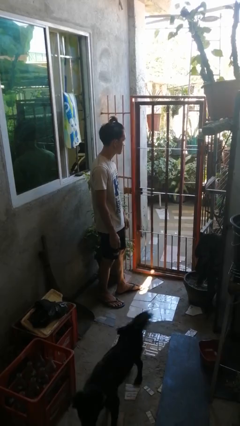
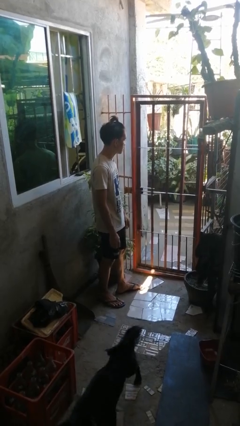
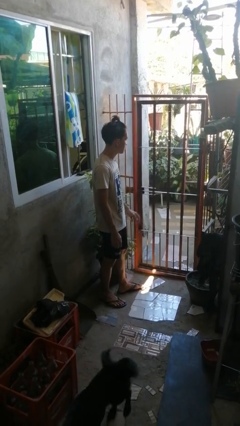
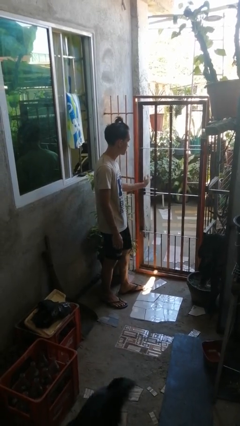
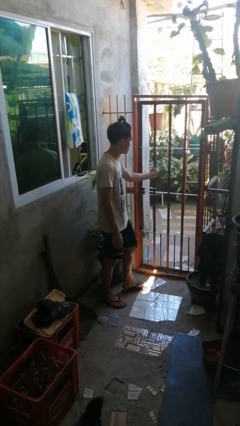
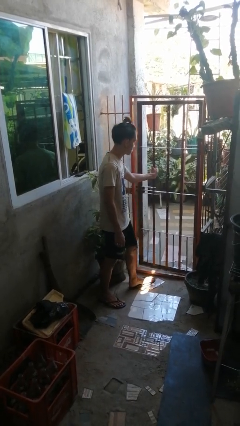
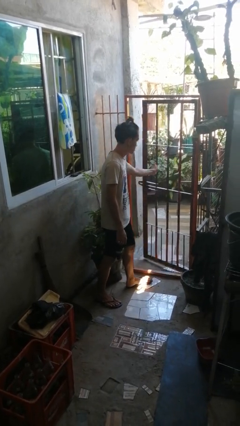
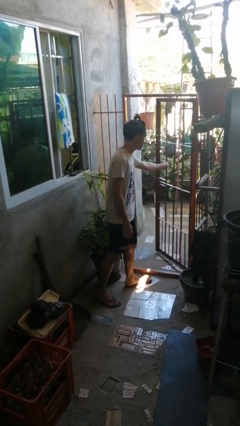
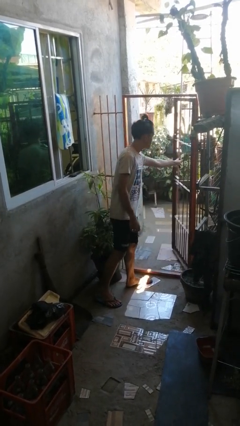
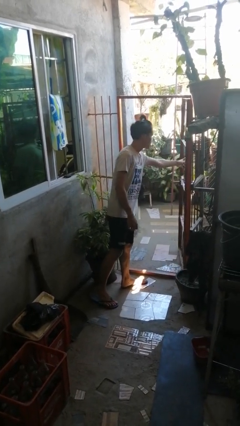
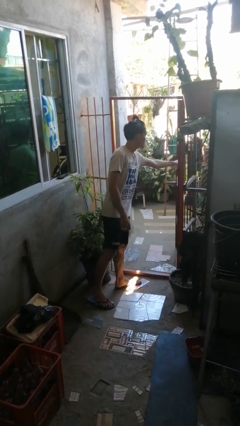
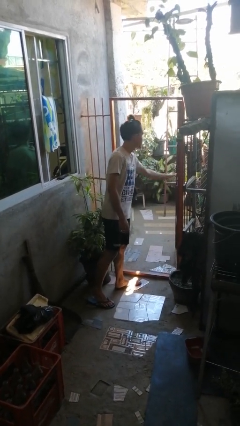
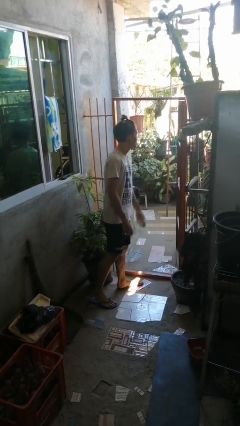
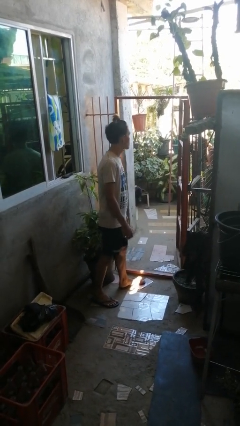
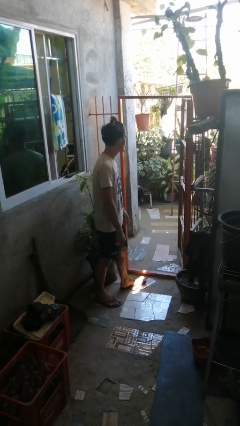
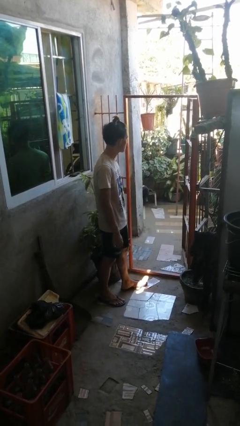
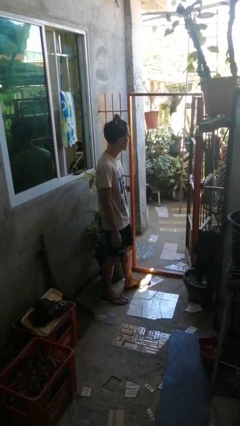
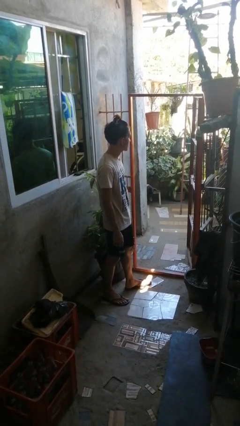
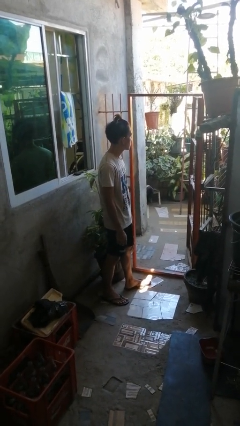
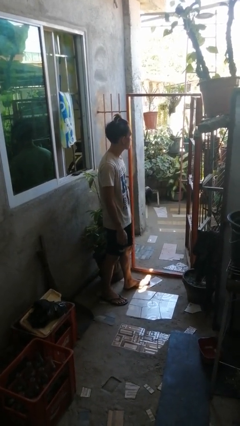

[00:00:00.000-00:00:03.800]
person opens gate

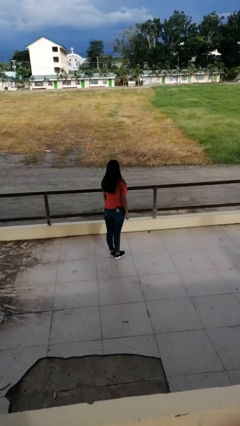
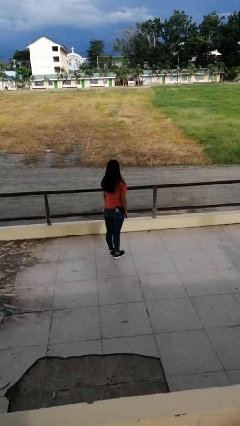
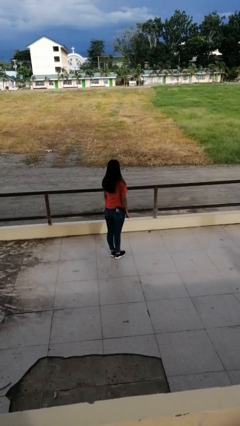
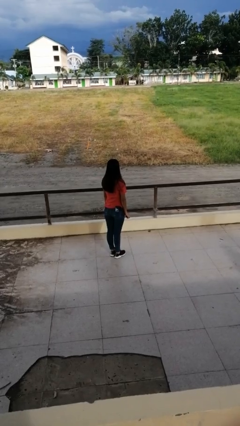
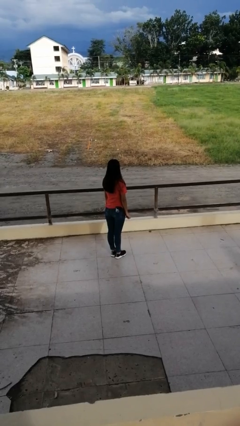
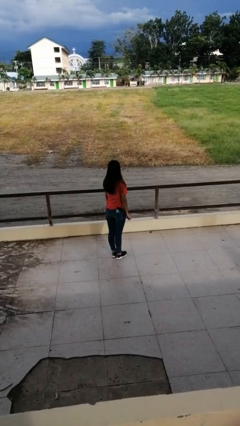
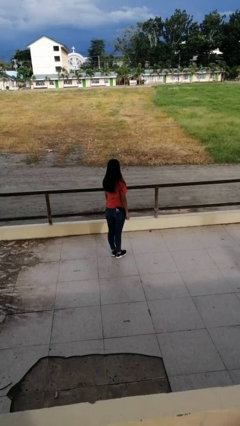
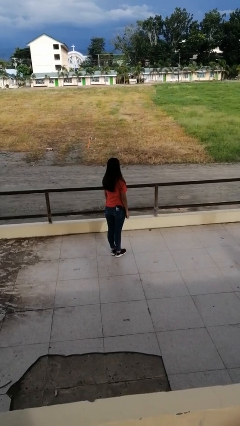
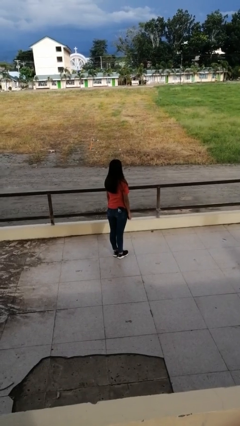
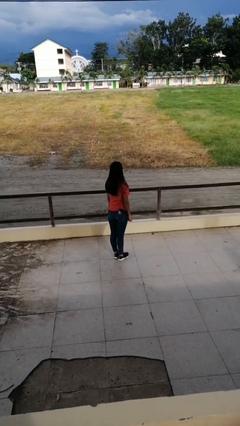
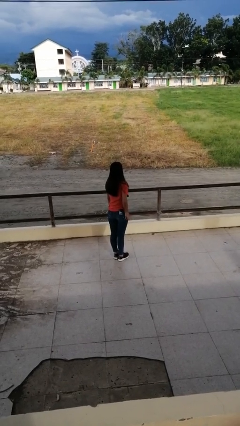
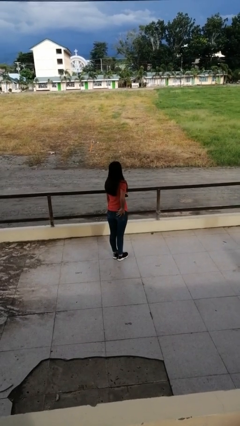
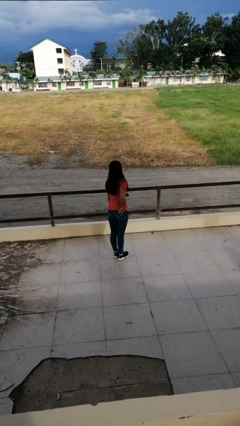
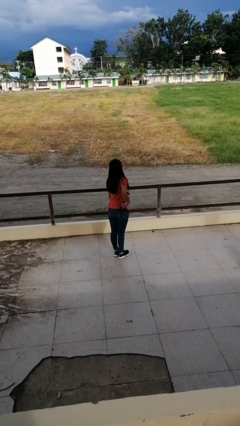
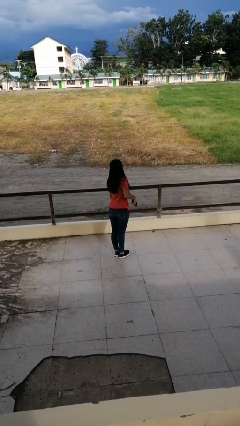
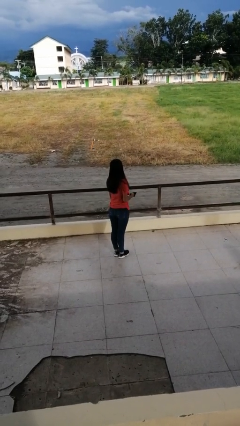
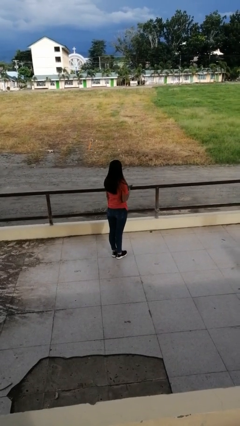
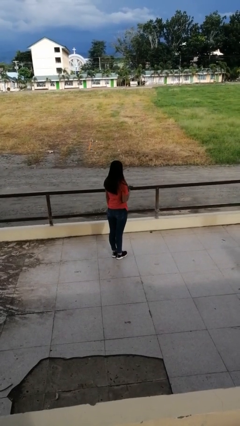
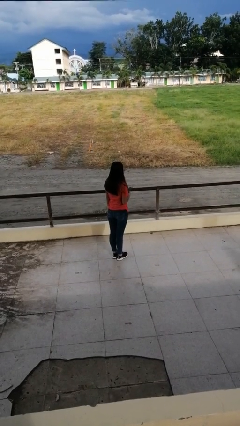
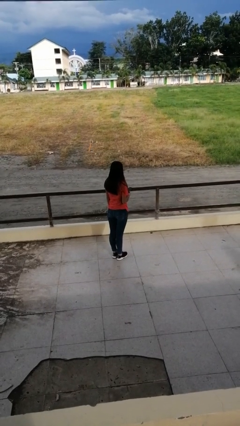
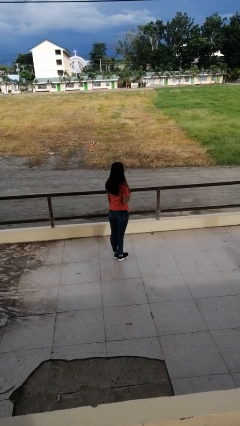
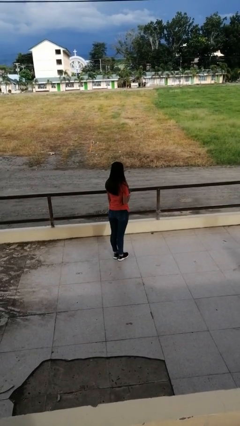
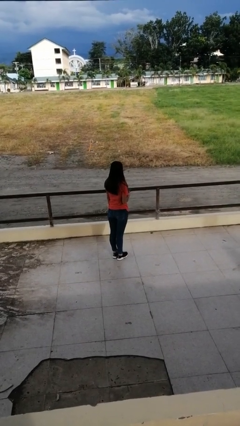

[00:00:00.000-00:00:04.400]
person takes phone from pocket

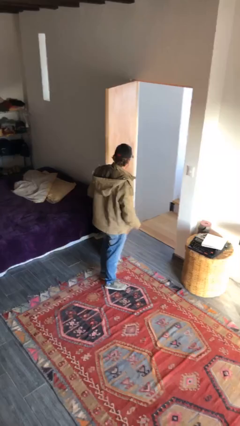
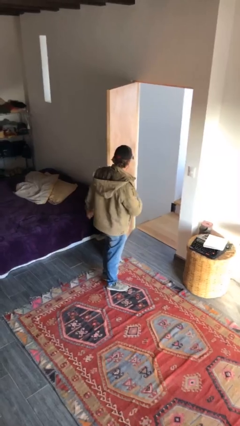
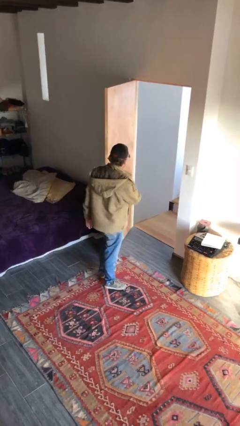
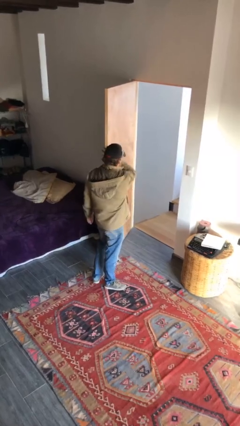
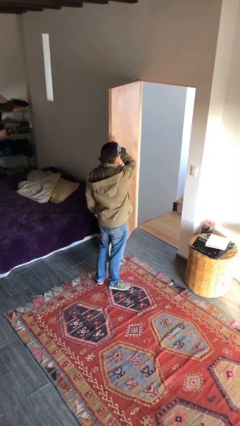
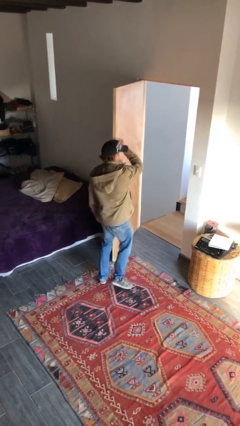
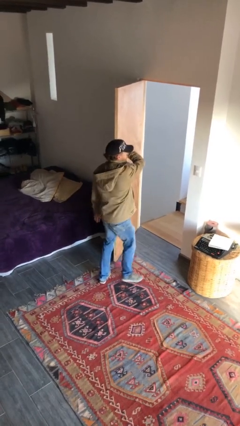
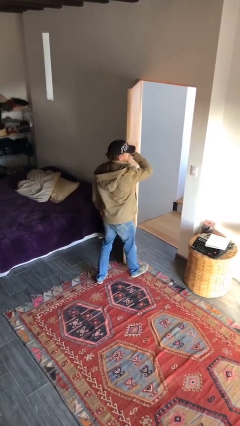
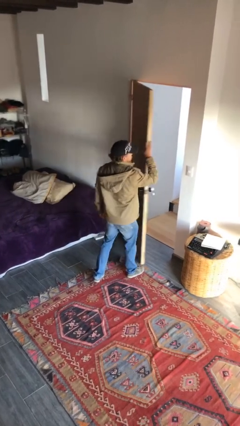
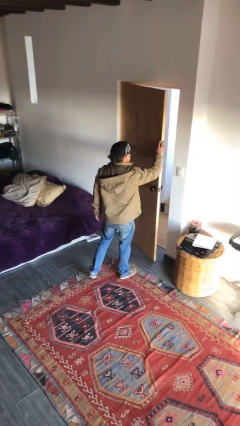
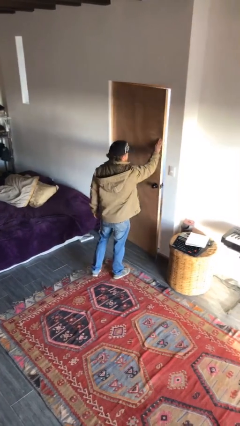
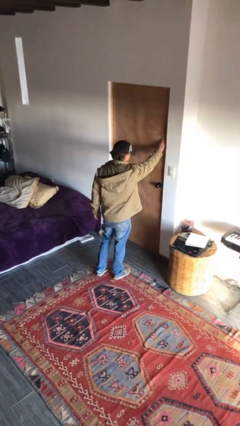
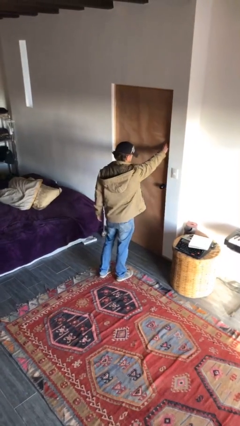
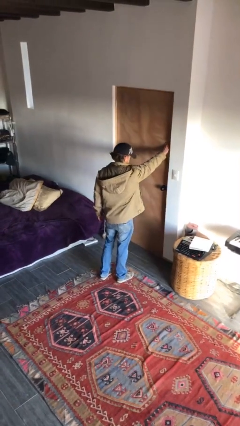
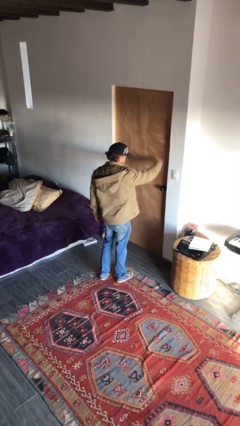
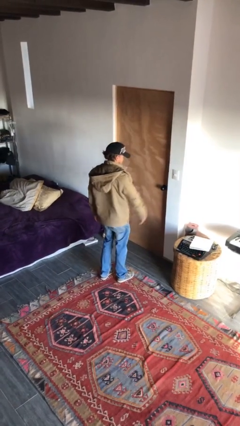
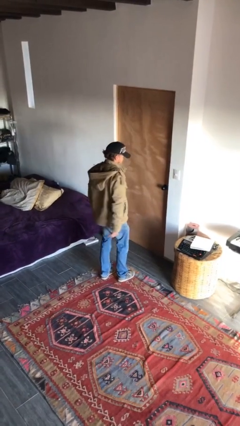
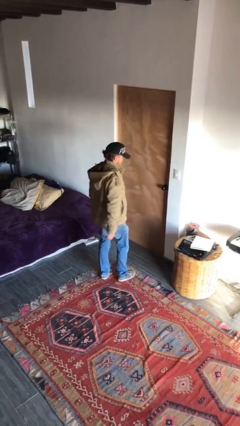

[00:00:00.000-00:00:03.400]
person closes facility door

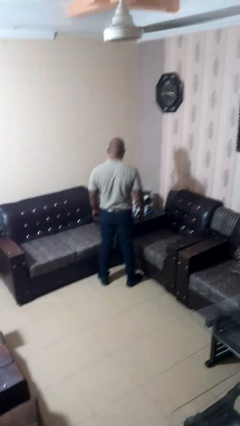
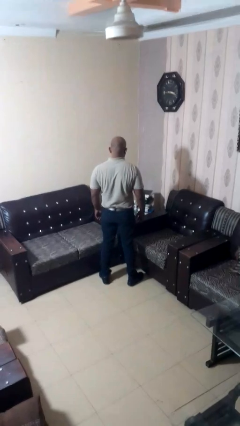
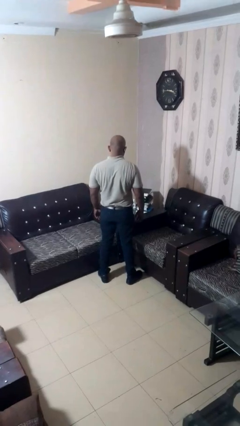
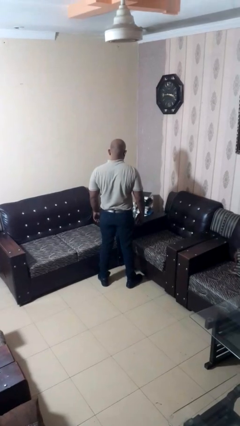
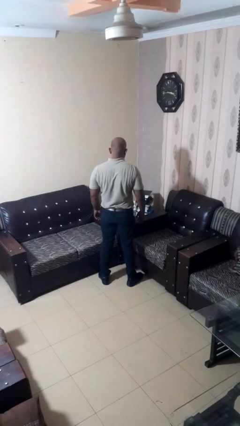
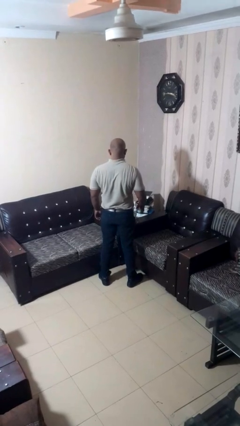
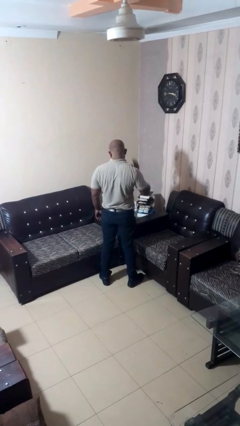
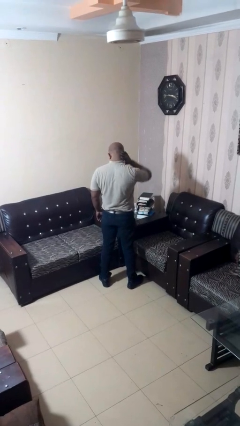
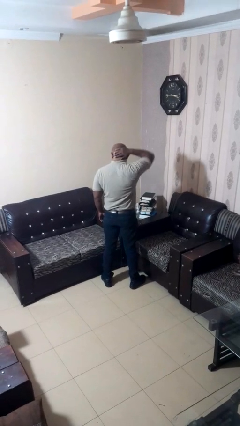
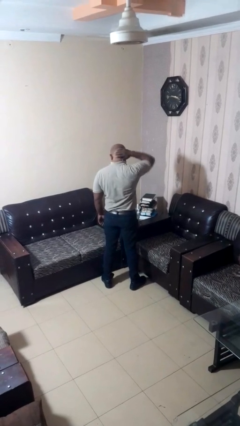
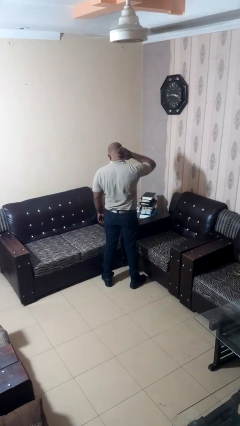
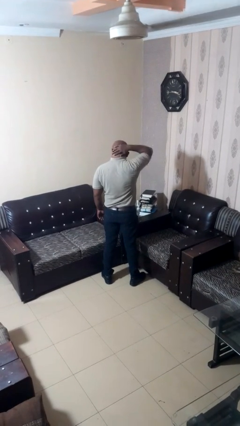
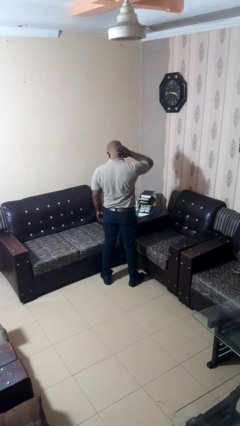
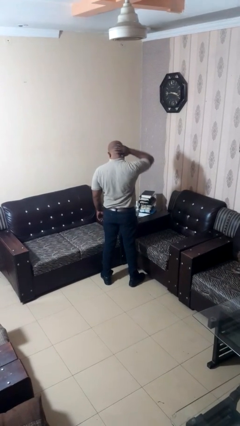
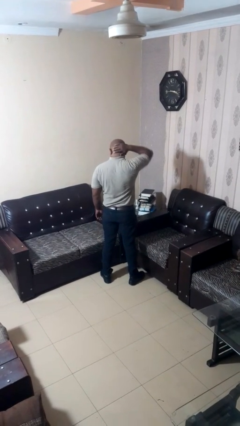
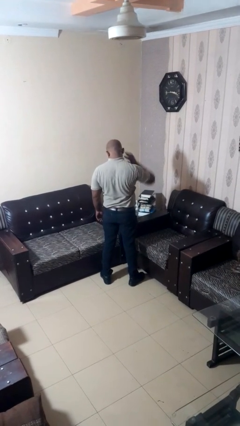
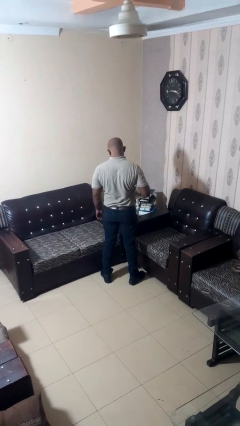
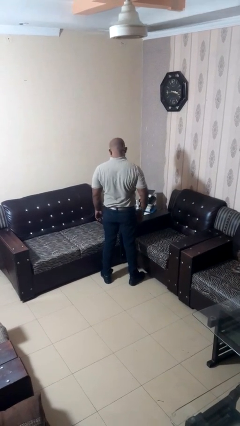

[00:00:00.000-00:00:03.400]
person rubs neck

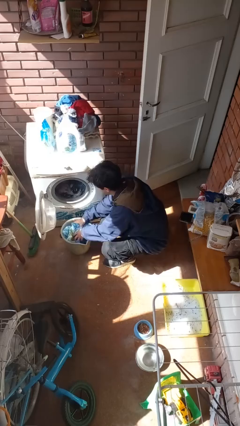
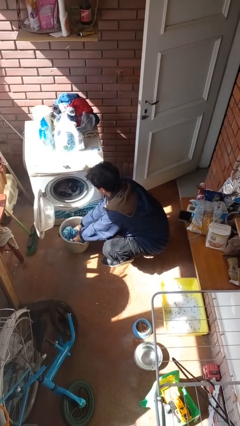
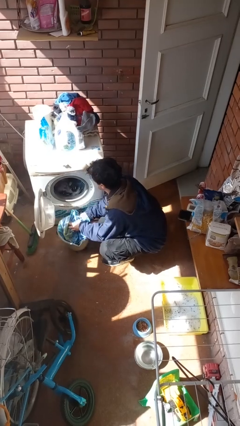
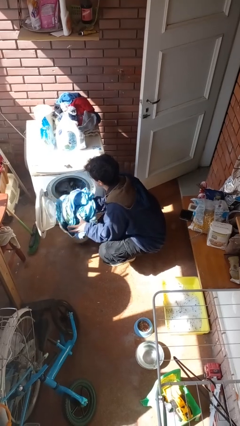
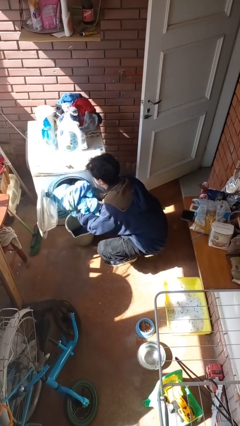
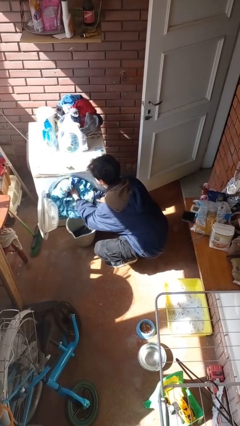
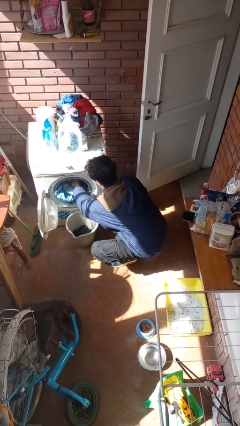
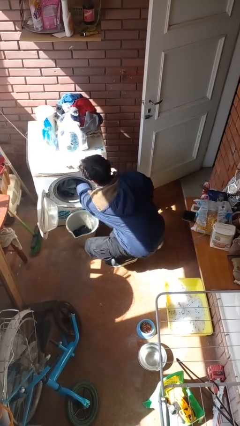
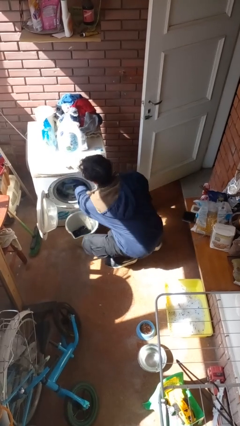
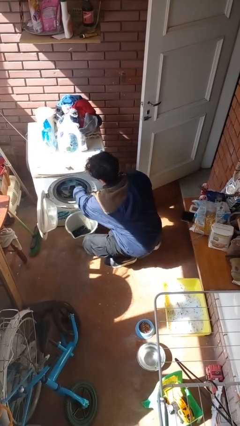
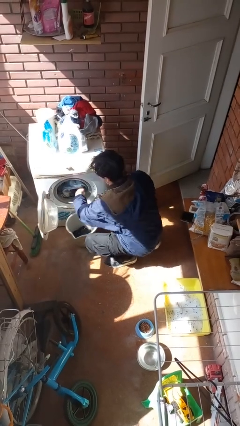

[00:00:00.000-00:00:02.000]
person loads clotheswasher

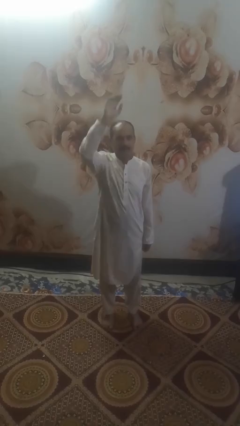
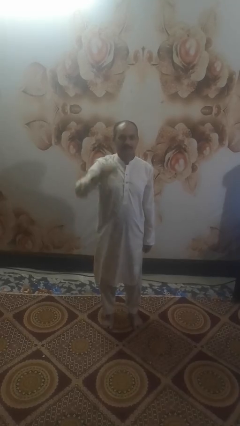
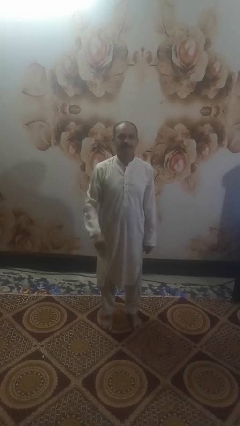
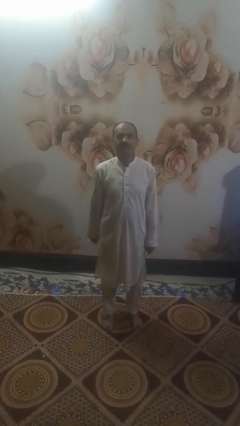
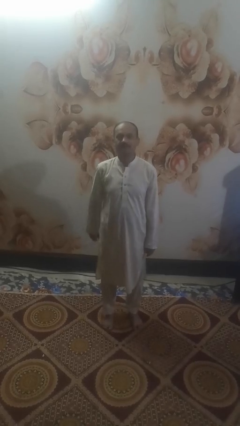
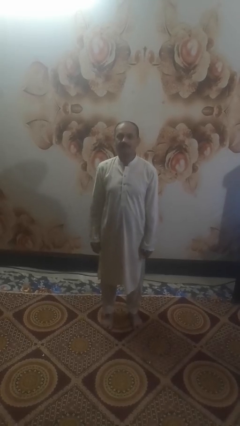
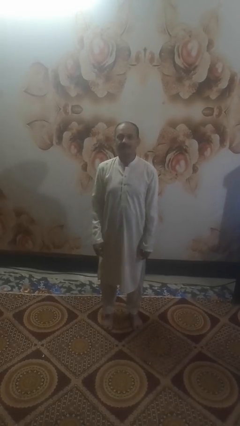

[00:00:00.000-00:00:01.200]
person gestures lower hand
